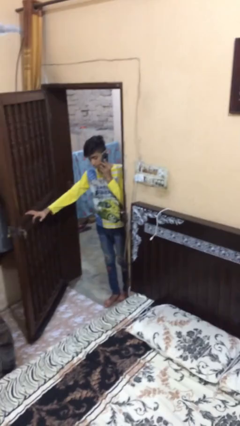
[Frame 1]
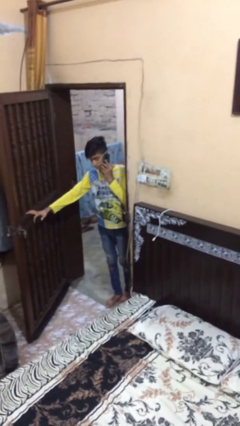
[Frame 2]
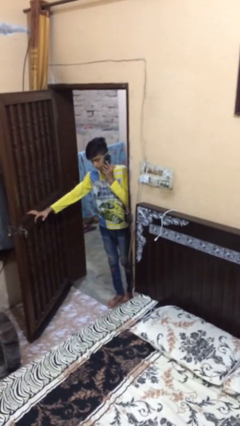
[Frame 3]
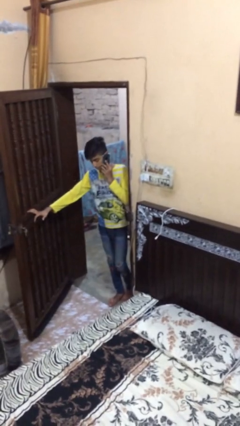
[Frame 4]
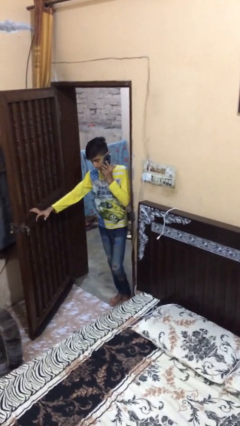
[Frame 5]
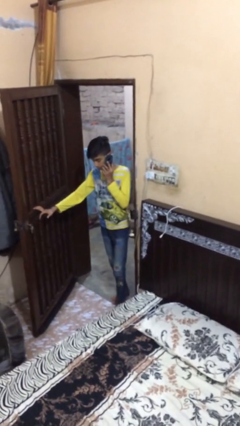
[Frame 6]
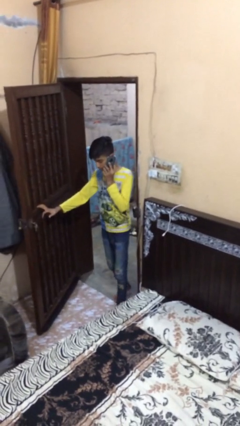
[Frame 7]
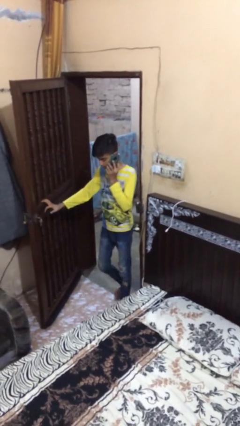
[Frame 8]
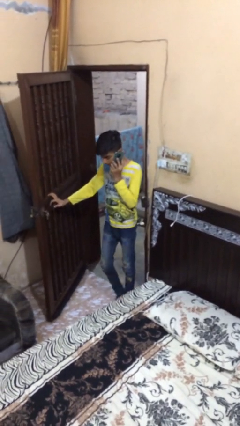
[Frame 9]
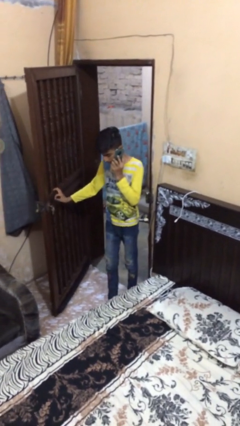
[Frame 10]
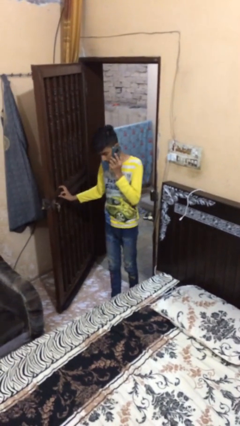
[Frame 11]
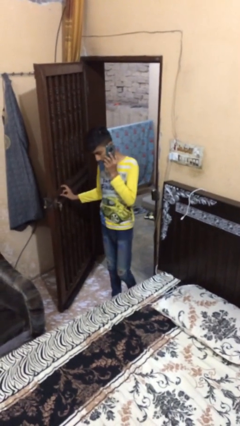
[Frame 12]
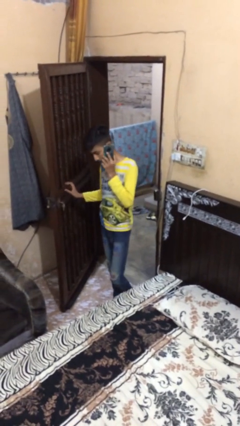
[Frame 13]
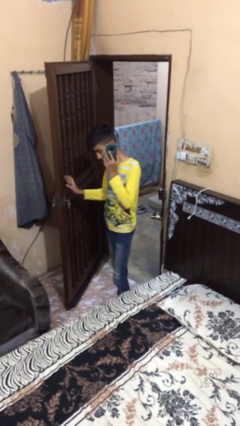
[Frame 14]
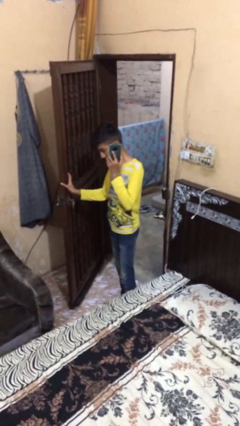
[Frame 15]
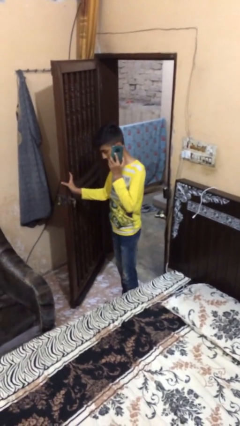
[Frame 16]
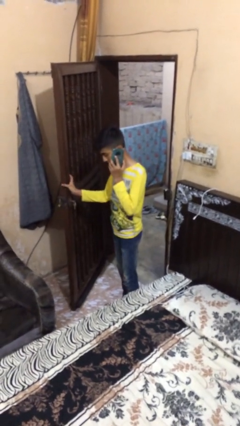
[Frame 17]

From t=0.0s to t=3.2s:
person enters scene through structure

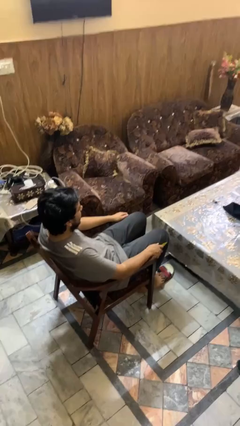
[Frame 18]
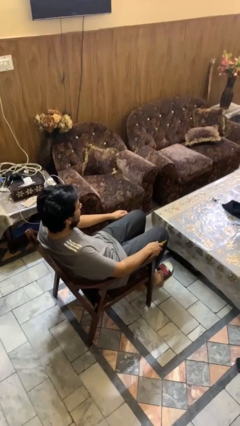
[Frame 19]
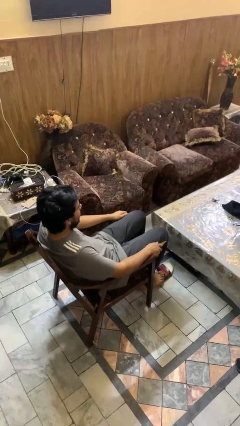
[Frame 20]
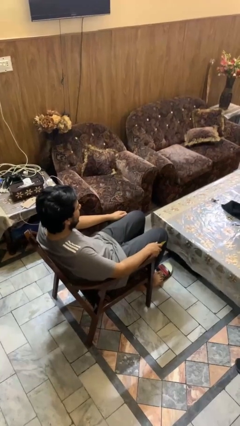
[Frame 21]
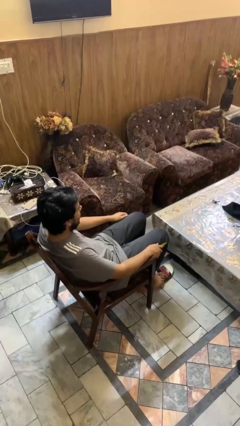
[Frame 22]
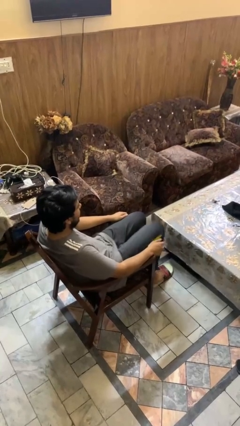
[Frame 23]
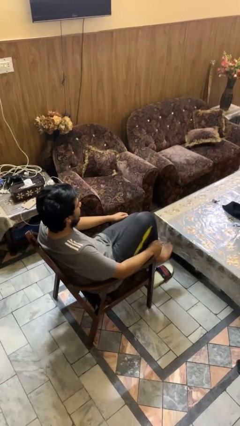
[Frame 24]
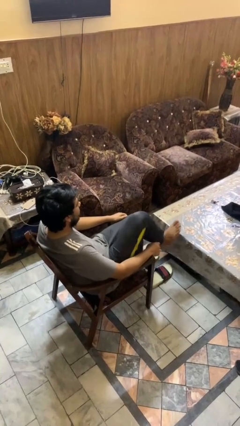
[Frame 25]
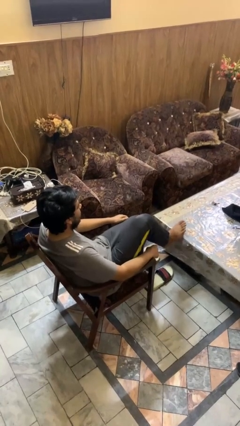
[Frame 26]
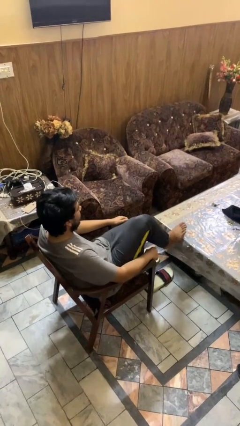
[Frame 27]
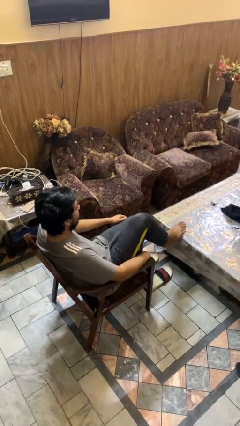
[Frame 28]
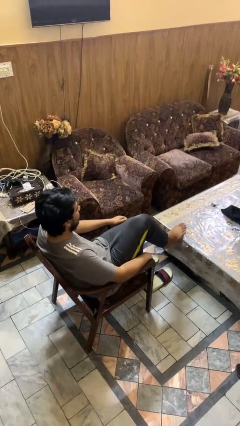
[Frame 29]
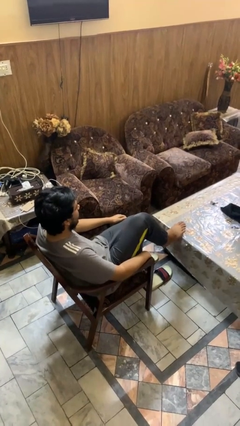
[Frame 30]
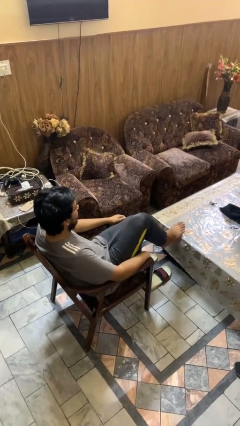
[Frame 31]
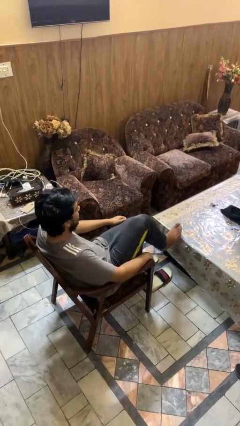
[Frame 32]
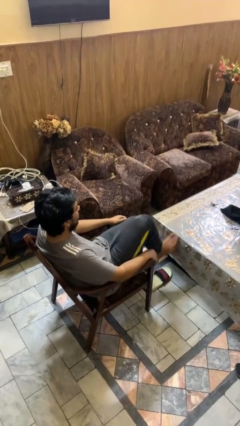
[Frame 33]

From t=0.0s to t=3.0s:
person puts feet up

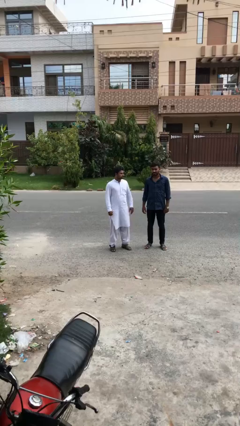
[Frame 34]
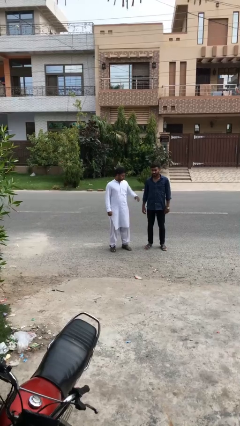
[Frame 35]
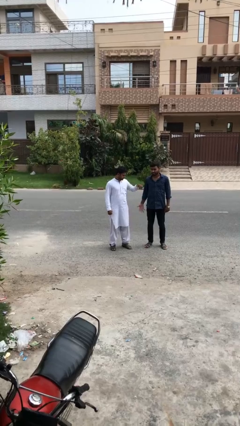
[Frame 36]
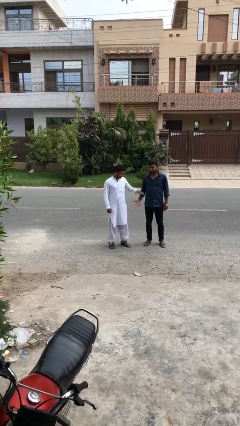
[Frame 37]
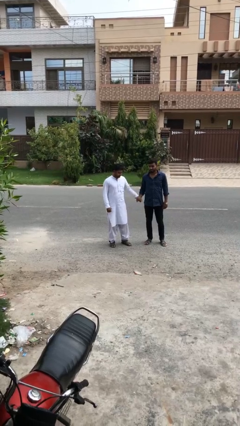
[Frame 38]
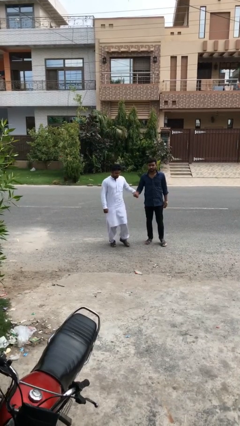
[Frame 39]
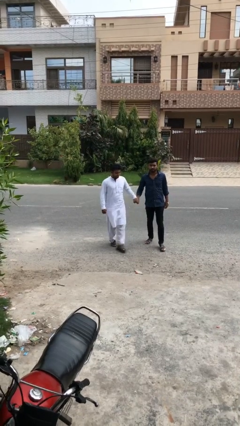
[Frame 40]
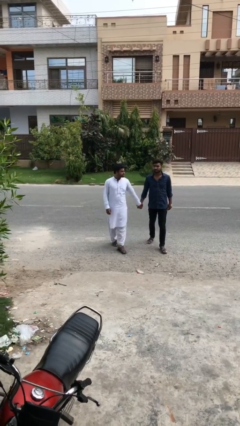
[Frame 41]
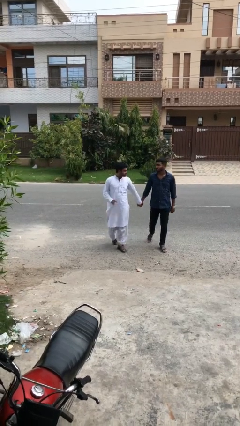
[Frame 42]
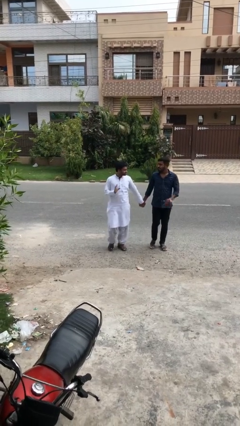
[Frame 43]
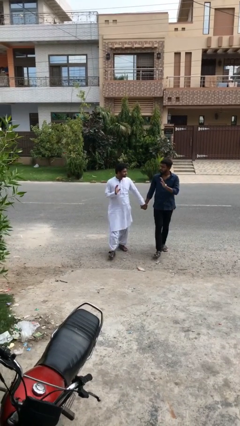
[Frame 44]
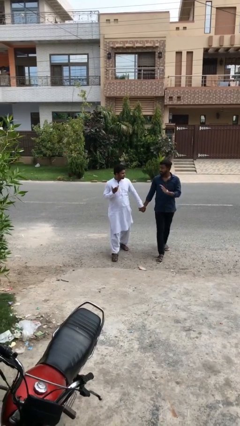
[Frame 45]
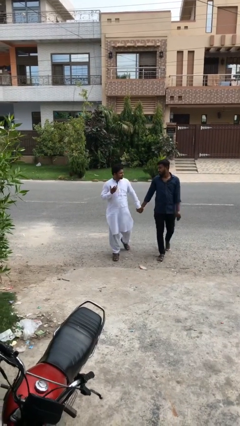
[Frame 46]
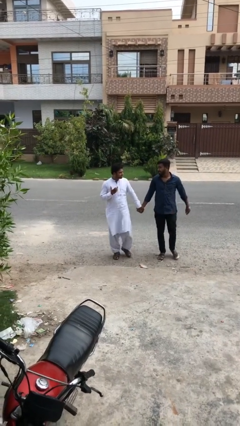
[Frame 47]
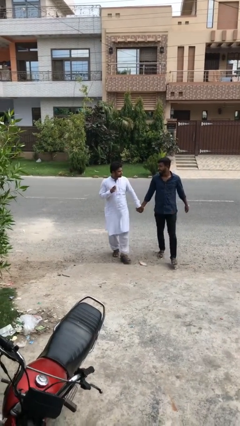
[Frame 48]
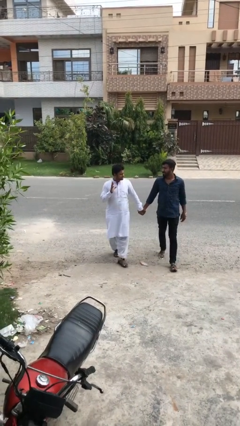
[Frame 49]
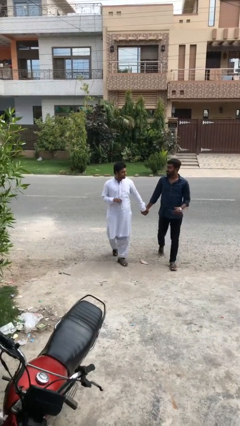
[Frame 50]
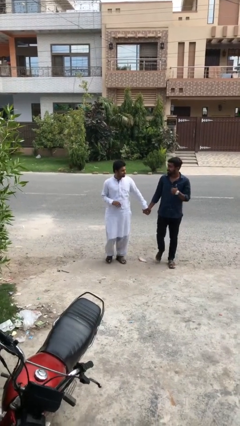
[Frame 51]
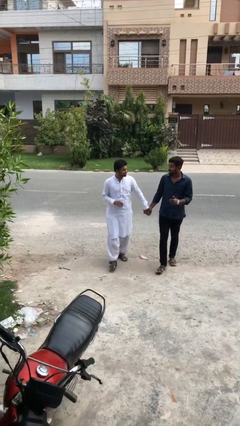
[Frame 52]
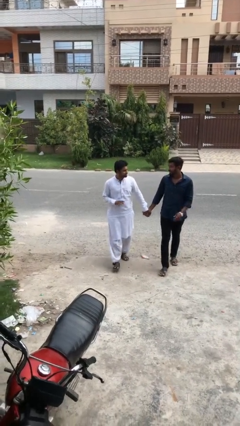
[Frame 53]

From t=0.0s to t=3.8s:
person holds hand

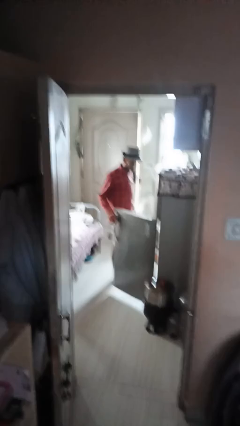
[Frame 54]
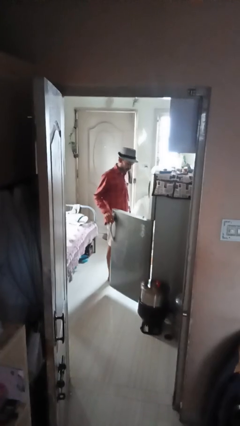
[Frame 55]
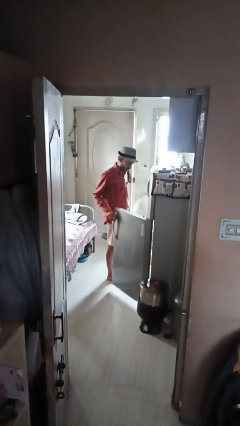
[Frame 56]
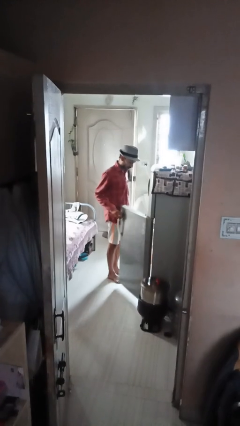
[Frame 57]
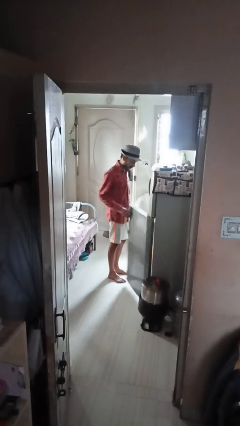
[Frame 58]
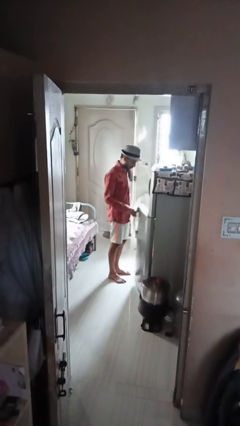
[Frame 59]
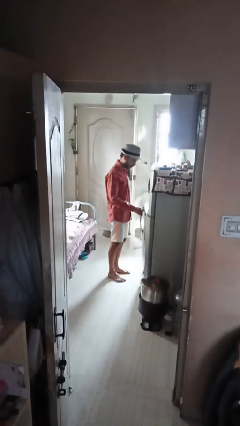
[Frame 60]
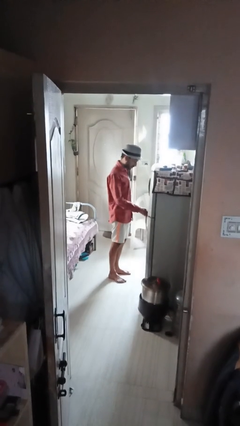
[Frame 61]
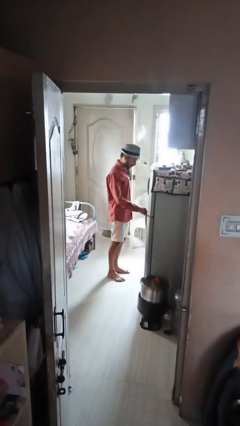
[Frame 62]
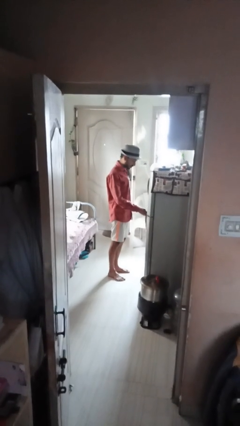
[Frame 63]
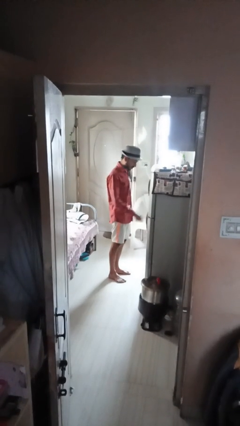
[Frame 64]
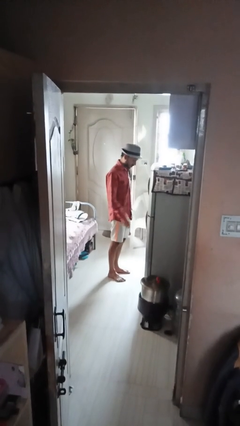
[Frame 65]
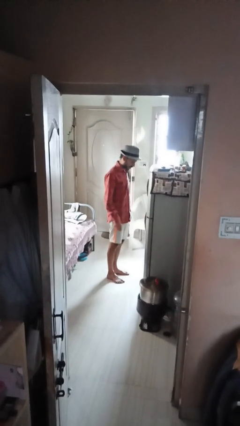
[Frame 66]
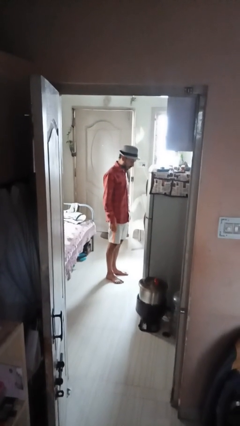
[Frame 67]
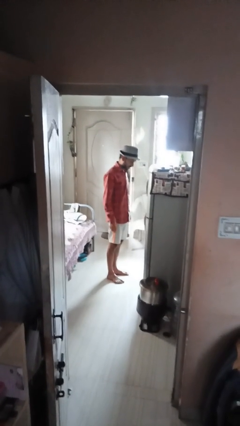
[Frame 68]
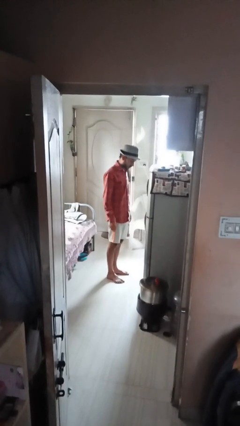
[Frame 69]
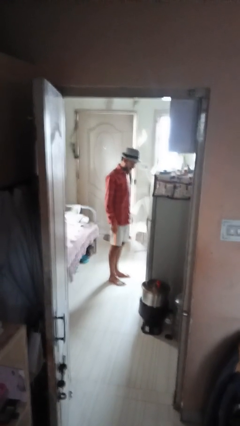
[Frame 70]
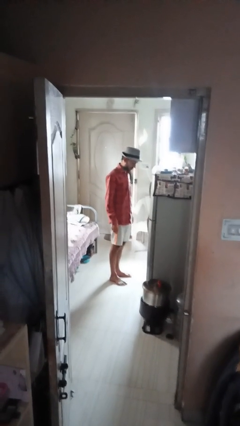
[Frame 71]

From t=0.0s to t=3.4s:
person closes refrigerator

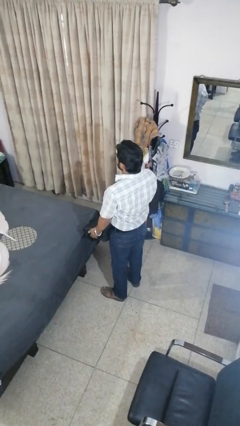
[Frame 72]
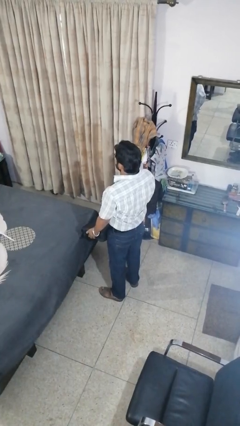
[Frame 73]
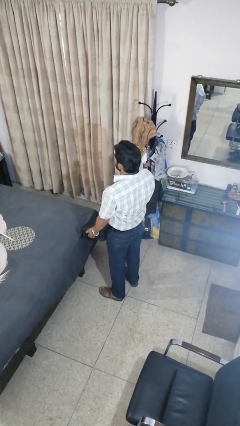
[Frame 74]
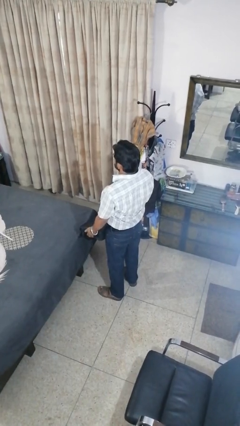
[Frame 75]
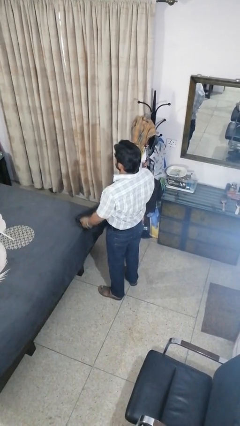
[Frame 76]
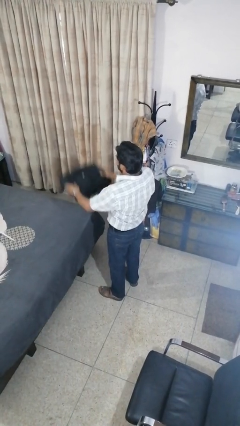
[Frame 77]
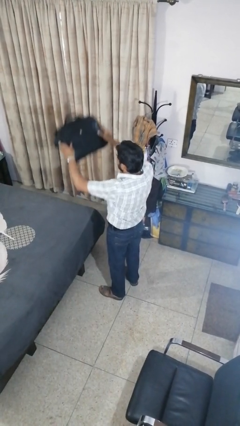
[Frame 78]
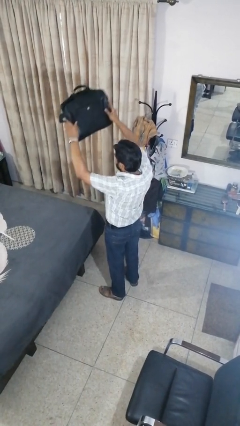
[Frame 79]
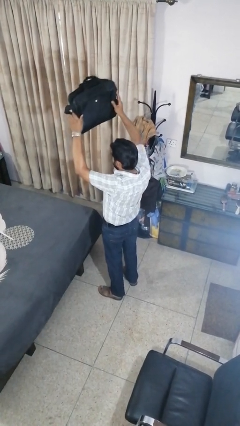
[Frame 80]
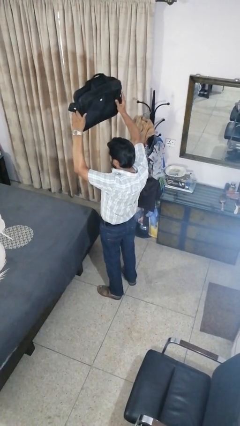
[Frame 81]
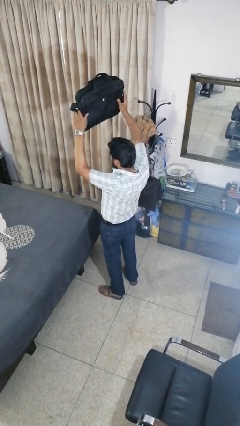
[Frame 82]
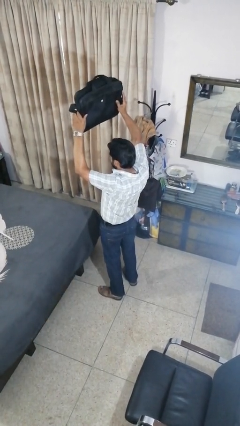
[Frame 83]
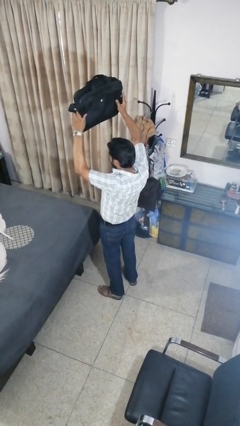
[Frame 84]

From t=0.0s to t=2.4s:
person holds object above head

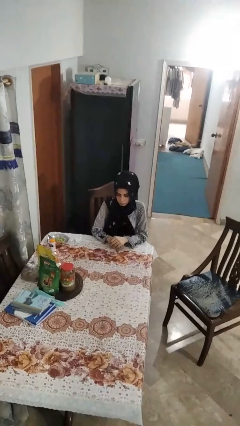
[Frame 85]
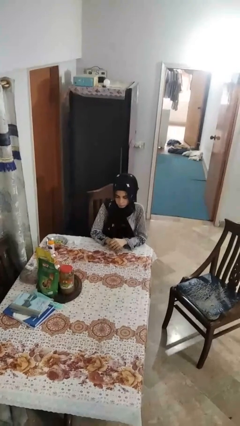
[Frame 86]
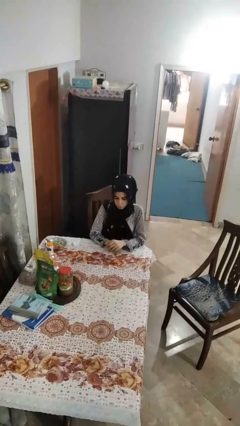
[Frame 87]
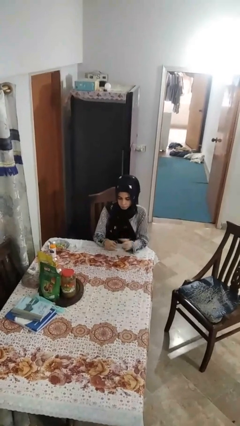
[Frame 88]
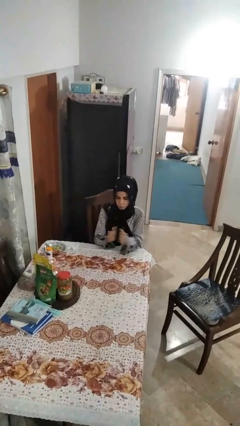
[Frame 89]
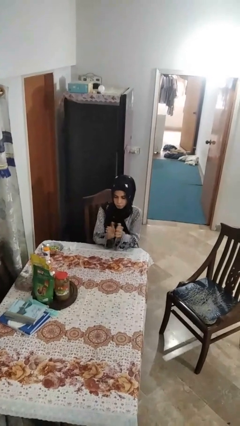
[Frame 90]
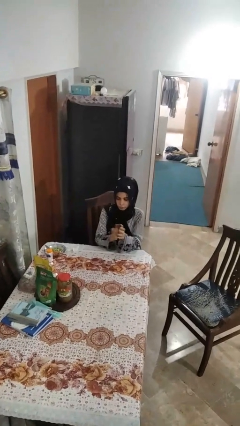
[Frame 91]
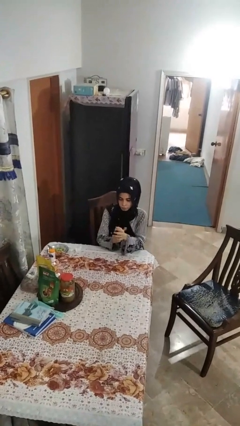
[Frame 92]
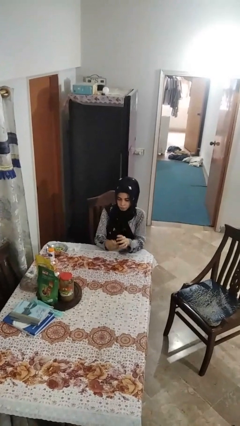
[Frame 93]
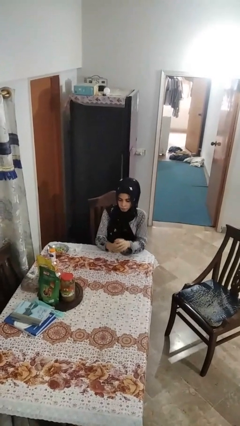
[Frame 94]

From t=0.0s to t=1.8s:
person claps hands
